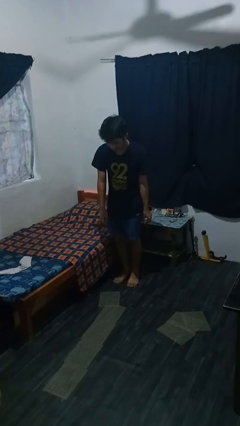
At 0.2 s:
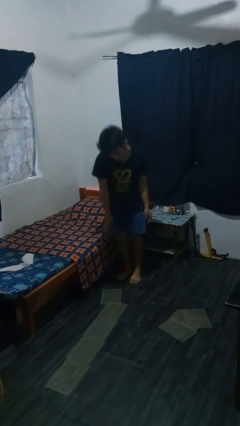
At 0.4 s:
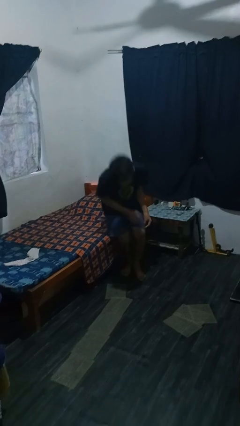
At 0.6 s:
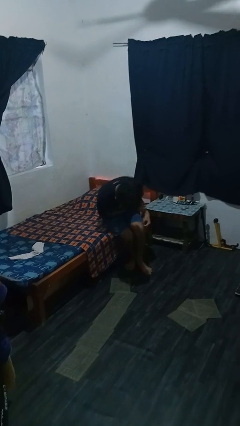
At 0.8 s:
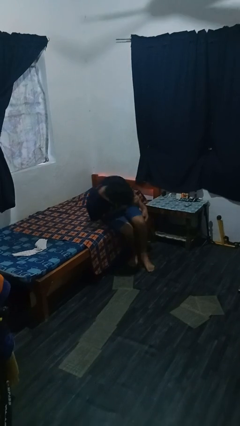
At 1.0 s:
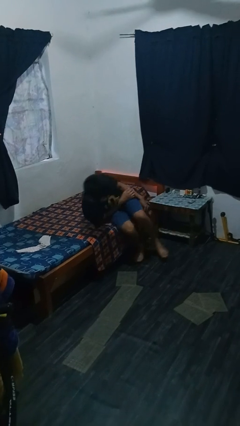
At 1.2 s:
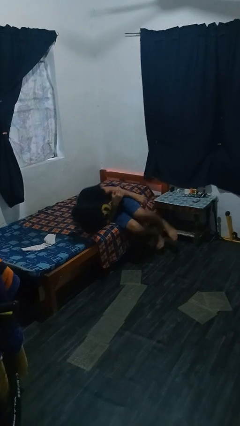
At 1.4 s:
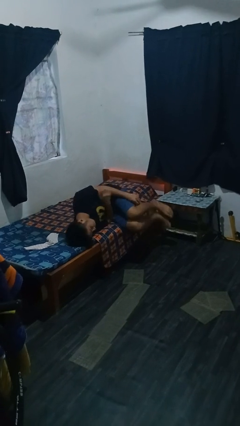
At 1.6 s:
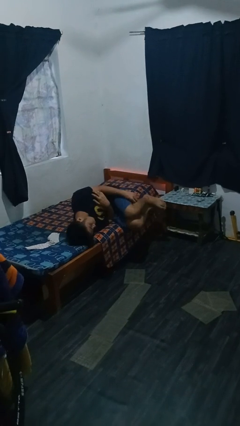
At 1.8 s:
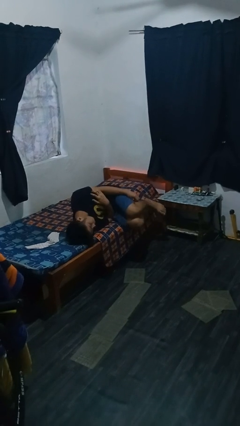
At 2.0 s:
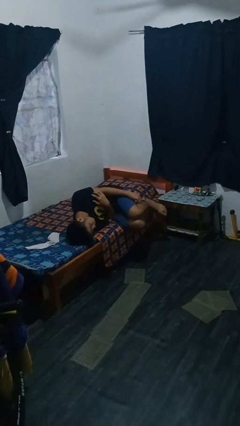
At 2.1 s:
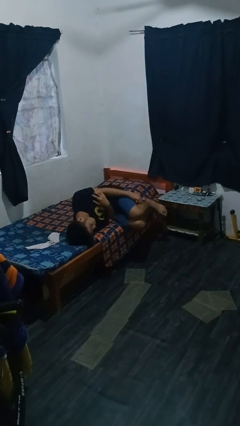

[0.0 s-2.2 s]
person lies down on bed

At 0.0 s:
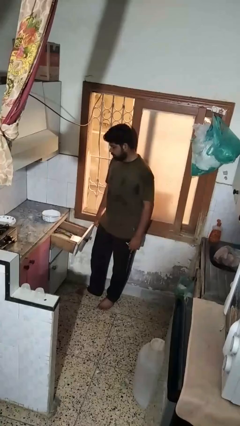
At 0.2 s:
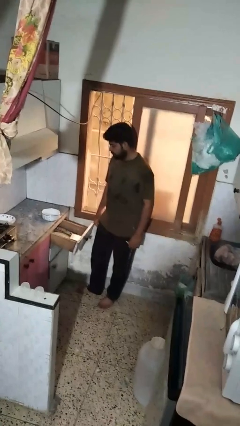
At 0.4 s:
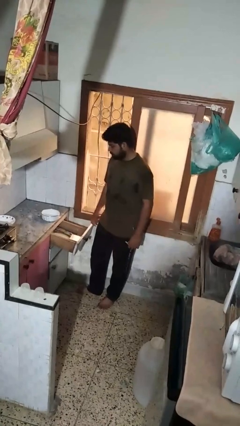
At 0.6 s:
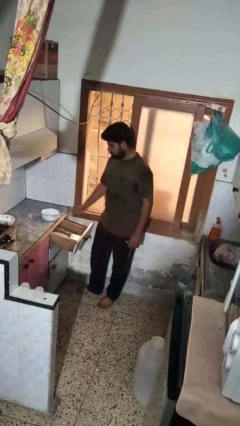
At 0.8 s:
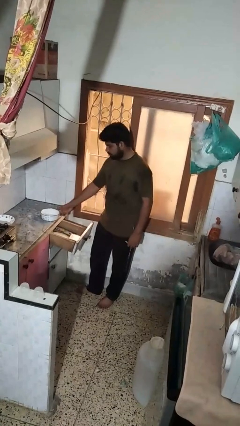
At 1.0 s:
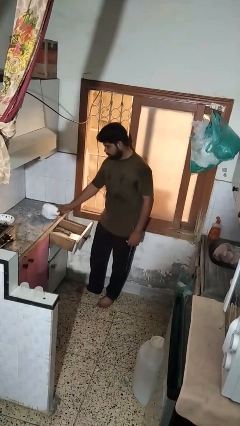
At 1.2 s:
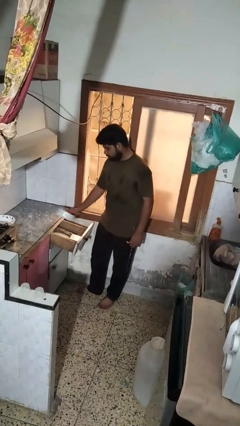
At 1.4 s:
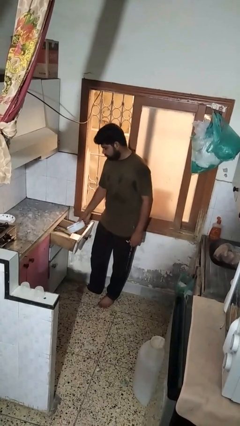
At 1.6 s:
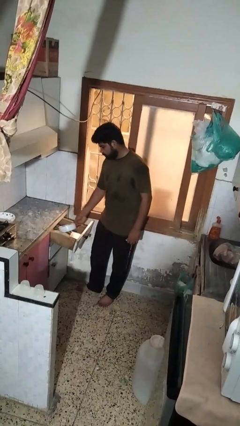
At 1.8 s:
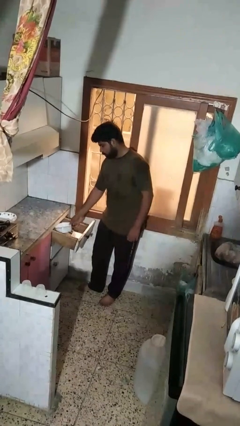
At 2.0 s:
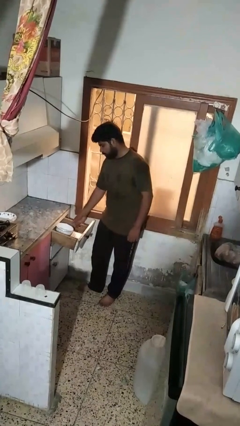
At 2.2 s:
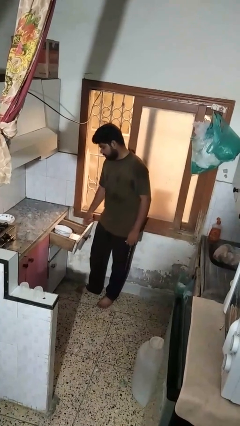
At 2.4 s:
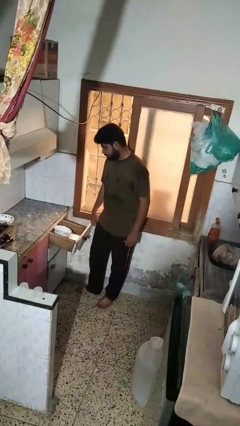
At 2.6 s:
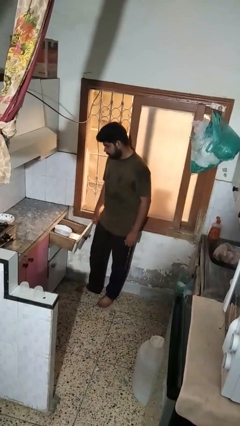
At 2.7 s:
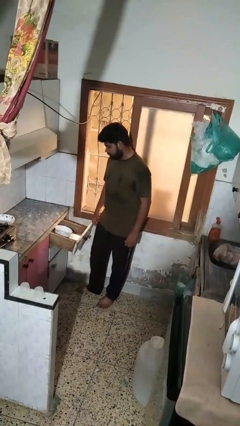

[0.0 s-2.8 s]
person puts object into kitchen drawer

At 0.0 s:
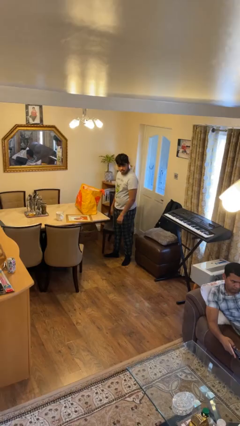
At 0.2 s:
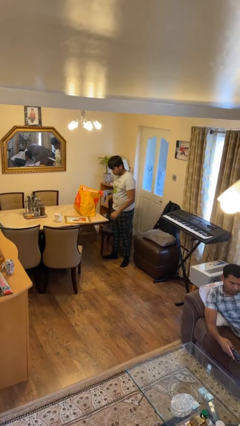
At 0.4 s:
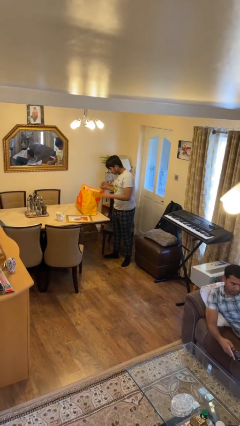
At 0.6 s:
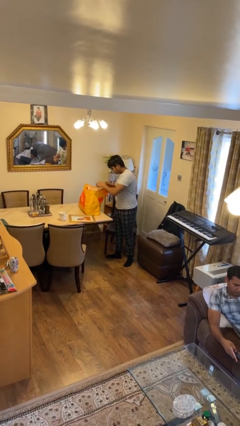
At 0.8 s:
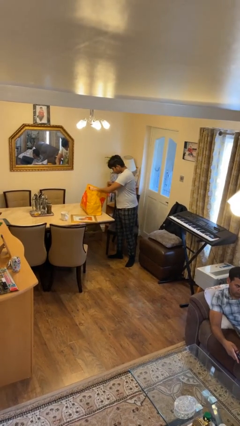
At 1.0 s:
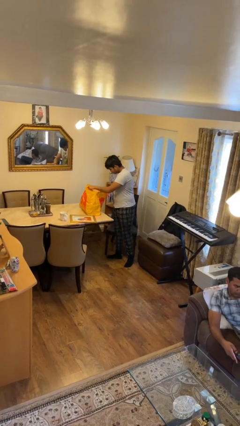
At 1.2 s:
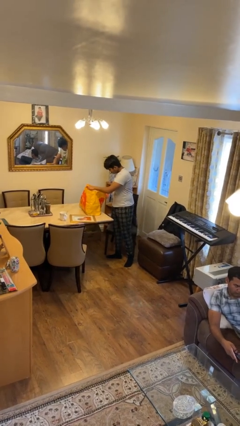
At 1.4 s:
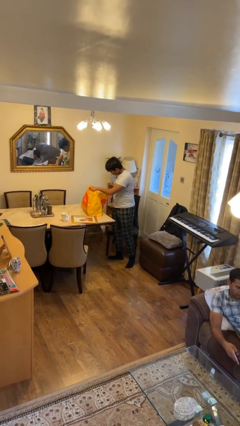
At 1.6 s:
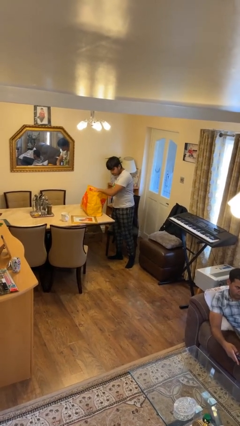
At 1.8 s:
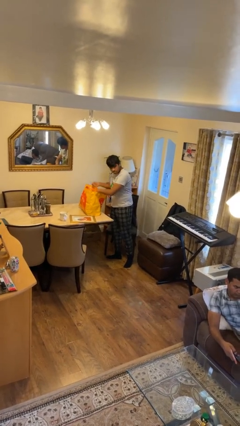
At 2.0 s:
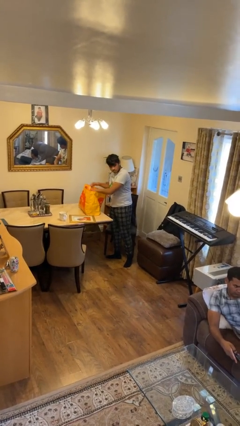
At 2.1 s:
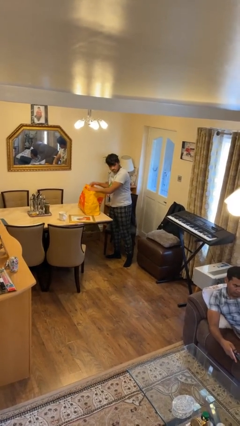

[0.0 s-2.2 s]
person searches in bag

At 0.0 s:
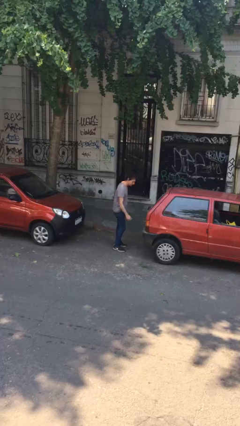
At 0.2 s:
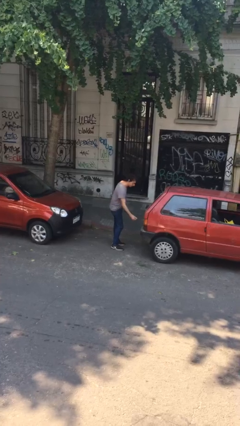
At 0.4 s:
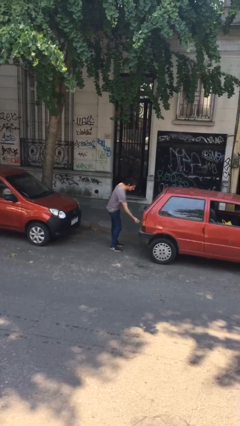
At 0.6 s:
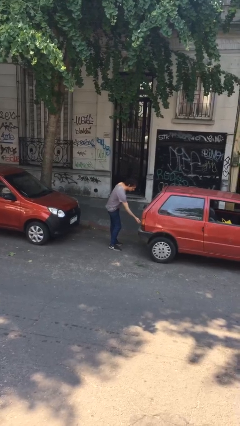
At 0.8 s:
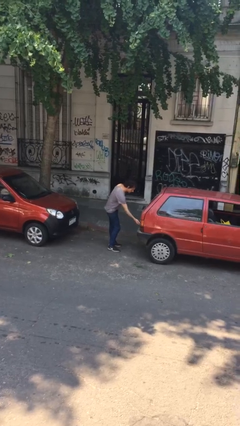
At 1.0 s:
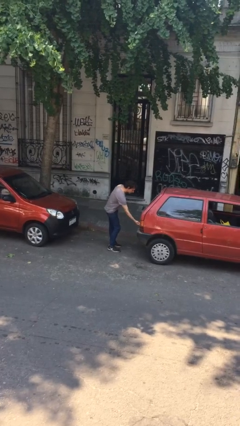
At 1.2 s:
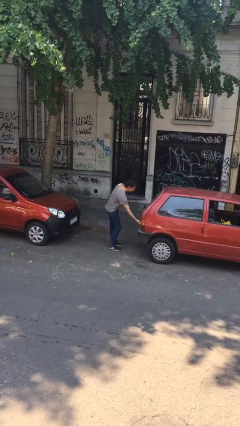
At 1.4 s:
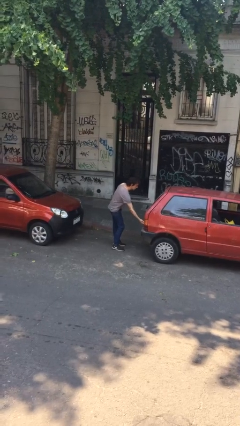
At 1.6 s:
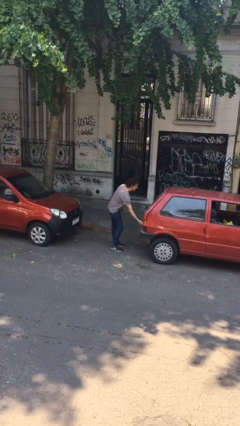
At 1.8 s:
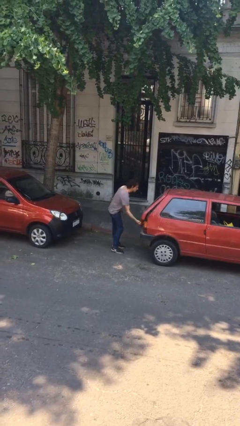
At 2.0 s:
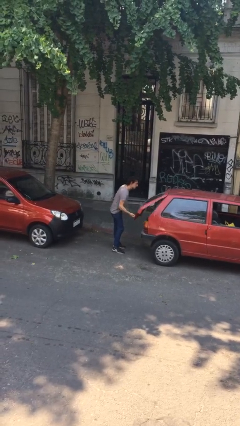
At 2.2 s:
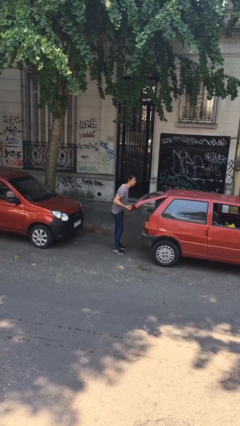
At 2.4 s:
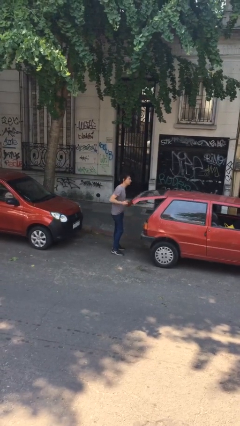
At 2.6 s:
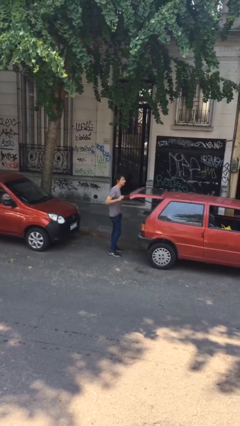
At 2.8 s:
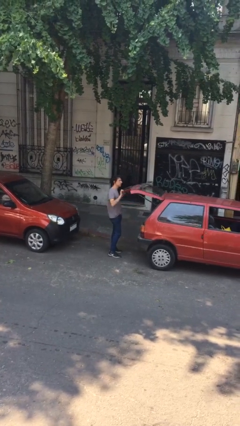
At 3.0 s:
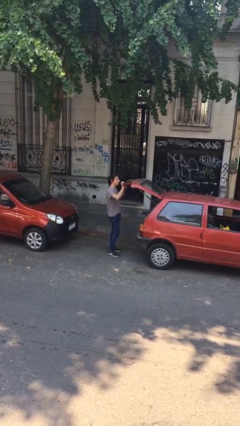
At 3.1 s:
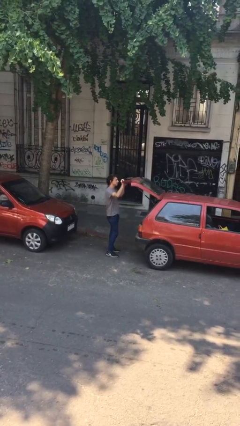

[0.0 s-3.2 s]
person opens car trunk

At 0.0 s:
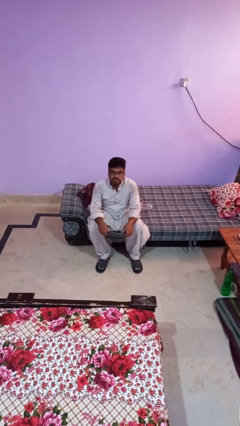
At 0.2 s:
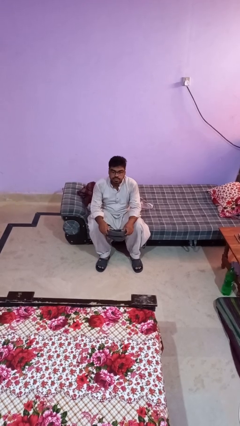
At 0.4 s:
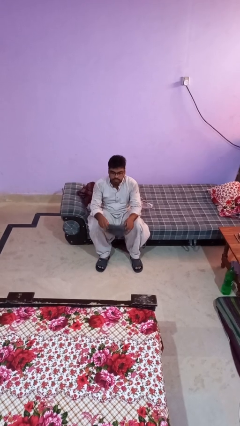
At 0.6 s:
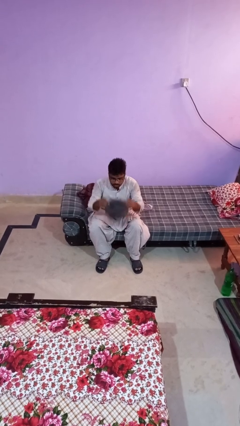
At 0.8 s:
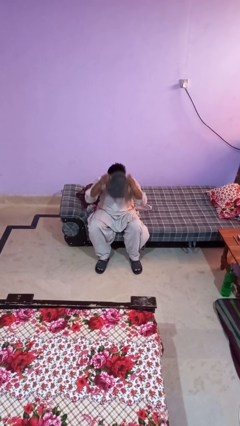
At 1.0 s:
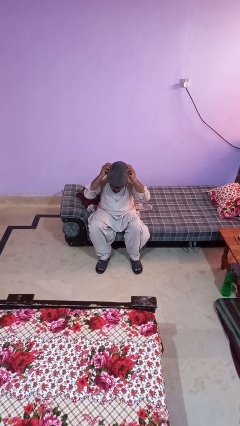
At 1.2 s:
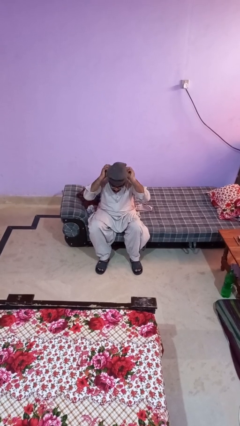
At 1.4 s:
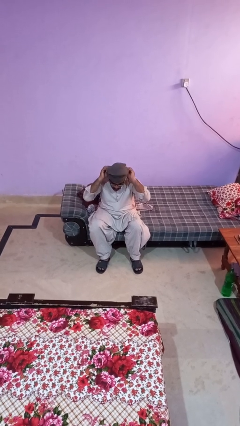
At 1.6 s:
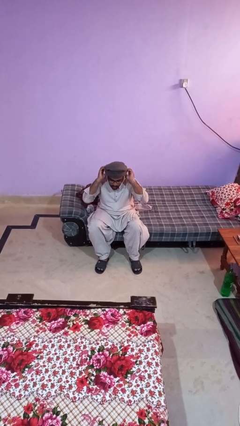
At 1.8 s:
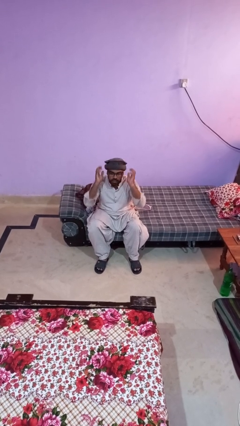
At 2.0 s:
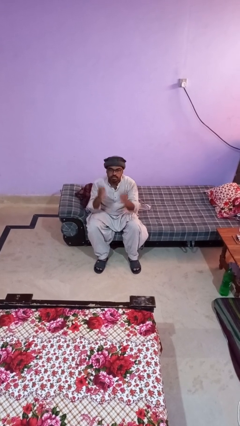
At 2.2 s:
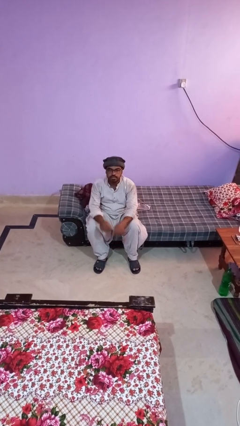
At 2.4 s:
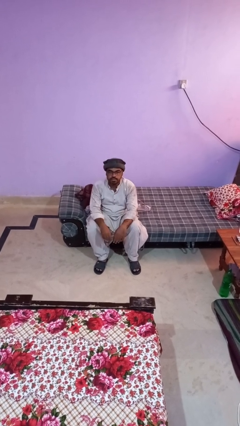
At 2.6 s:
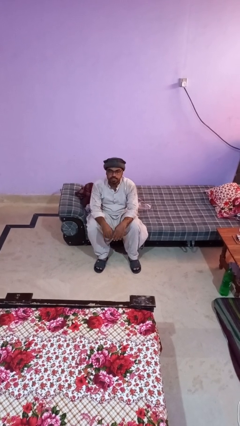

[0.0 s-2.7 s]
person puts on hat

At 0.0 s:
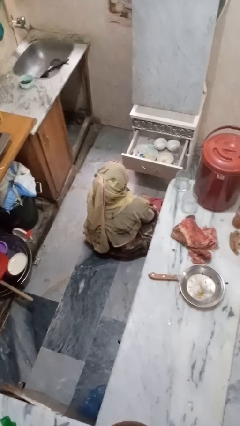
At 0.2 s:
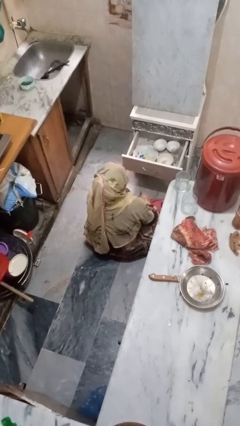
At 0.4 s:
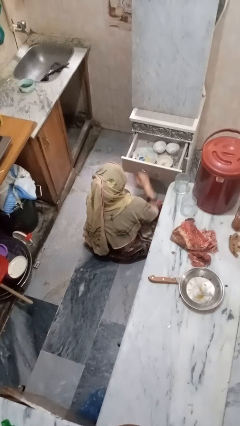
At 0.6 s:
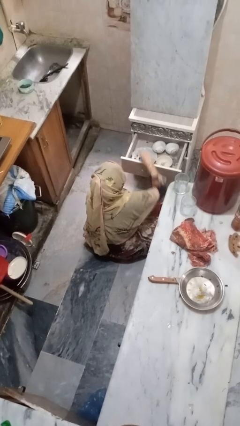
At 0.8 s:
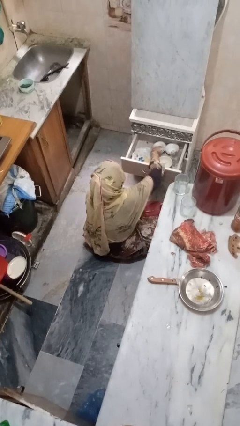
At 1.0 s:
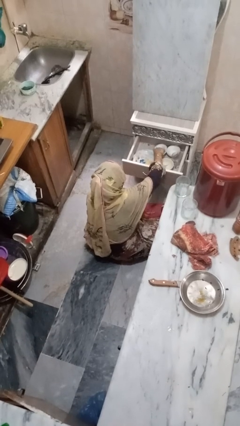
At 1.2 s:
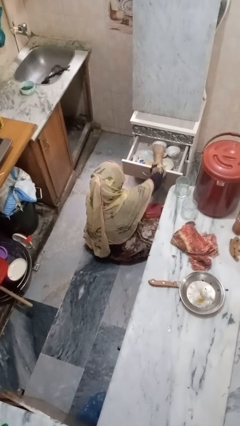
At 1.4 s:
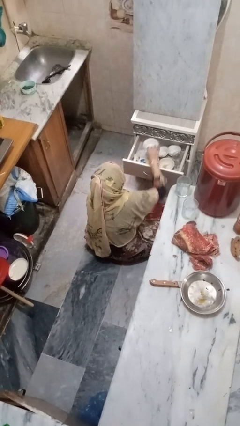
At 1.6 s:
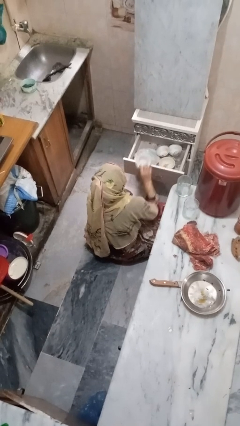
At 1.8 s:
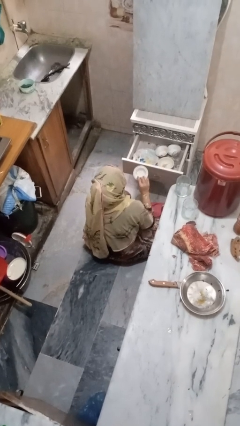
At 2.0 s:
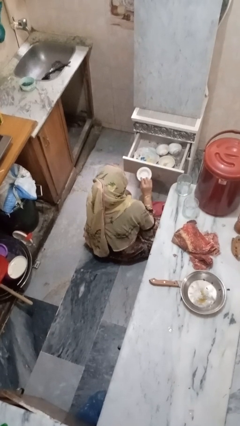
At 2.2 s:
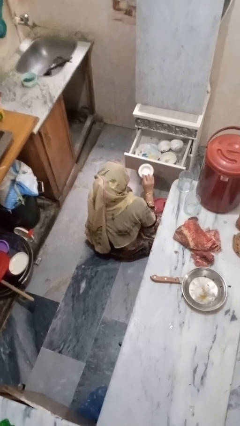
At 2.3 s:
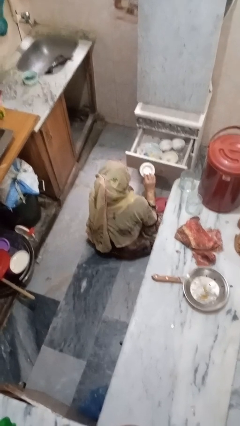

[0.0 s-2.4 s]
person takes object from kitchen drawer

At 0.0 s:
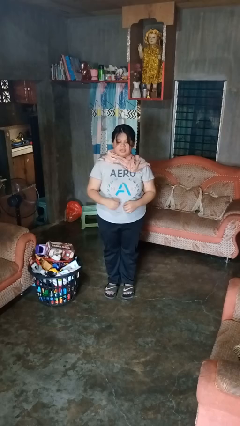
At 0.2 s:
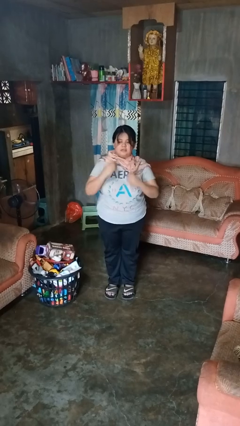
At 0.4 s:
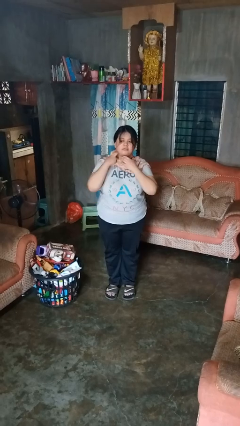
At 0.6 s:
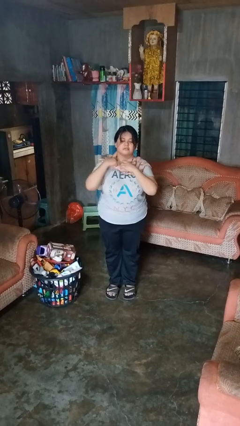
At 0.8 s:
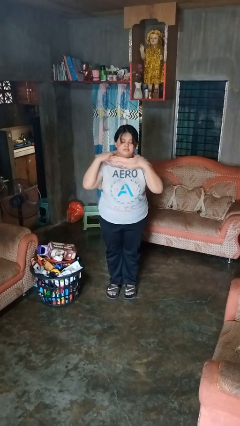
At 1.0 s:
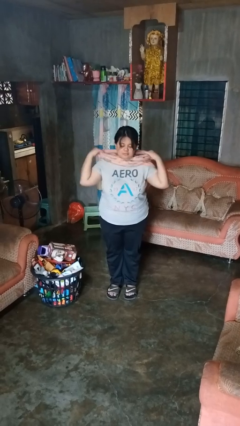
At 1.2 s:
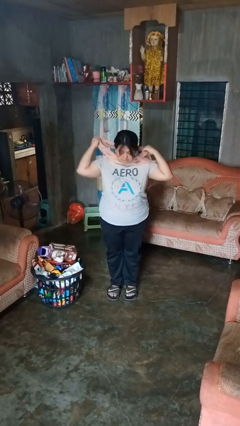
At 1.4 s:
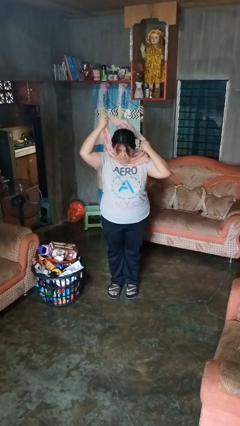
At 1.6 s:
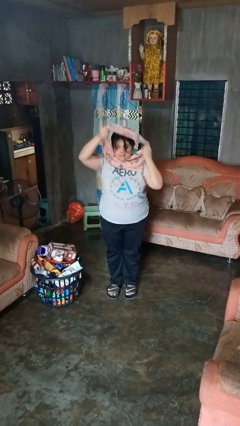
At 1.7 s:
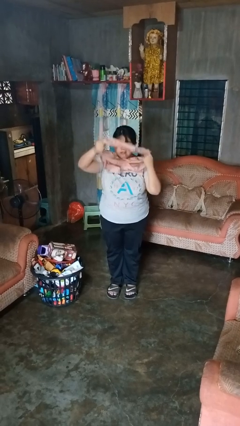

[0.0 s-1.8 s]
person takes off scarf
